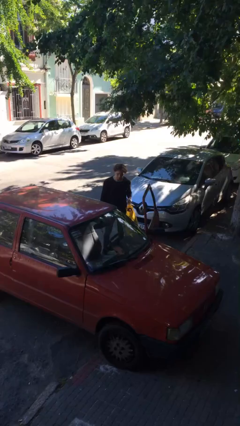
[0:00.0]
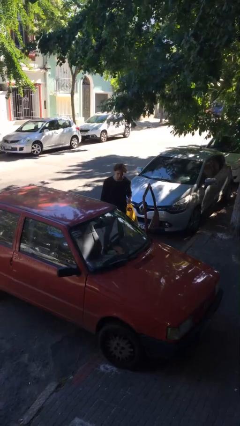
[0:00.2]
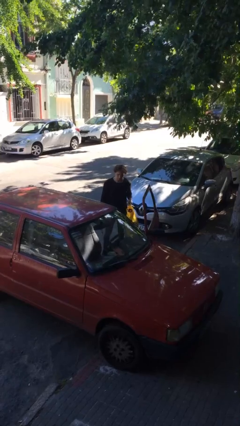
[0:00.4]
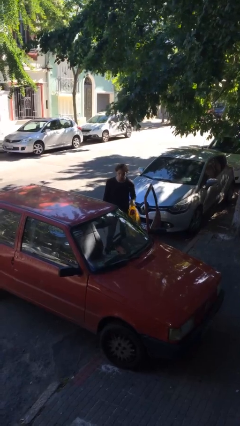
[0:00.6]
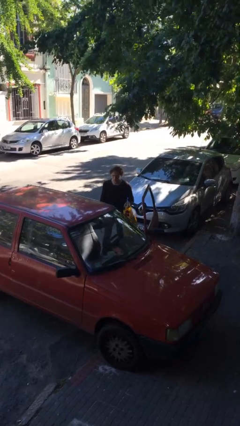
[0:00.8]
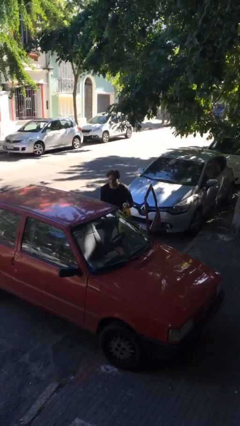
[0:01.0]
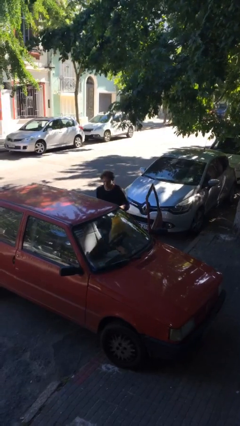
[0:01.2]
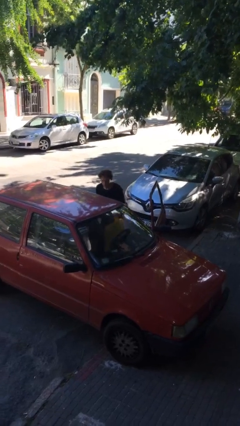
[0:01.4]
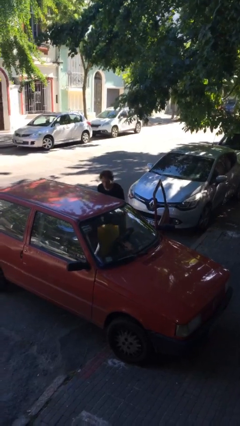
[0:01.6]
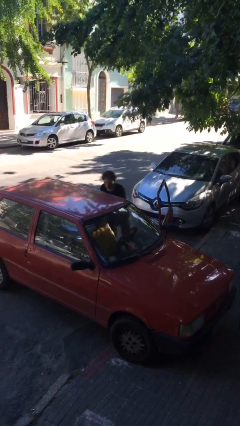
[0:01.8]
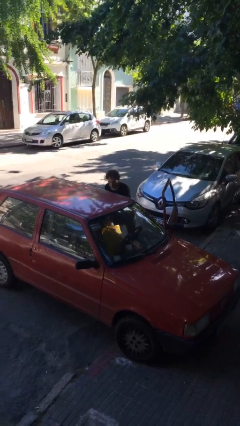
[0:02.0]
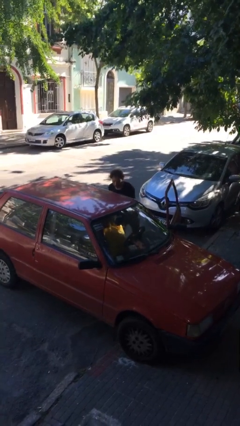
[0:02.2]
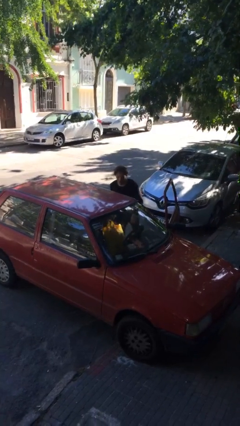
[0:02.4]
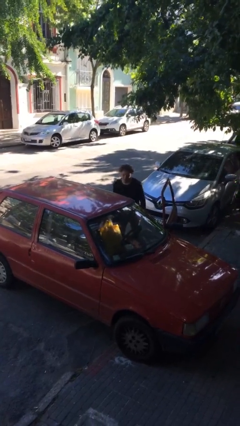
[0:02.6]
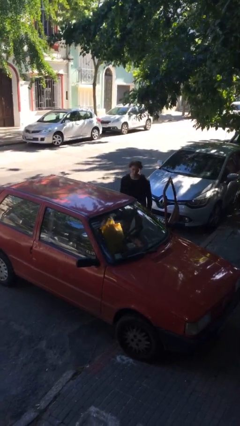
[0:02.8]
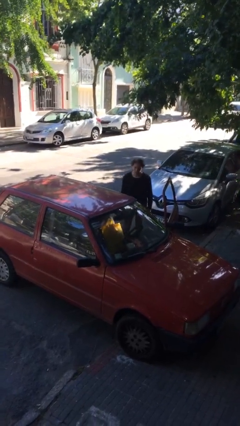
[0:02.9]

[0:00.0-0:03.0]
person loads car

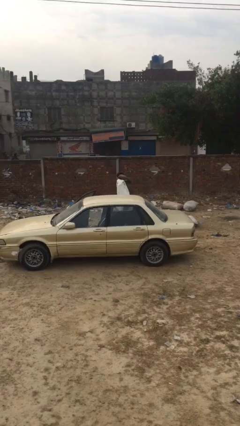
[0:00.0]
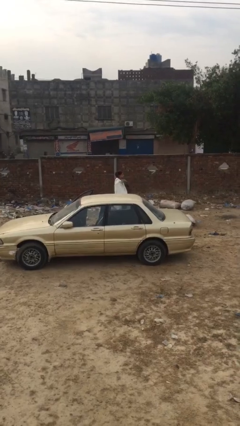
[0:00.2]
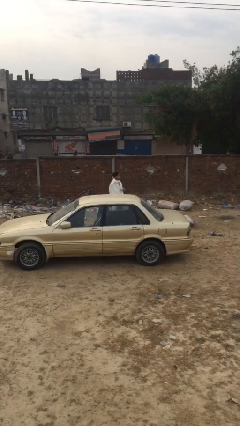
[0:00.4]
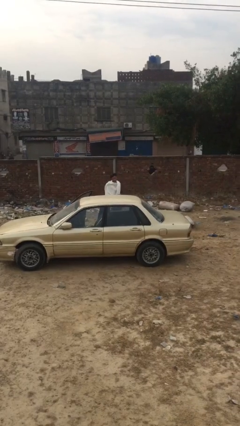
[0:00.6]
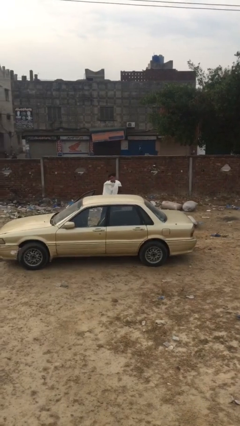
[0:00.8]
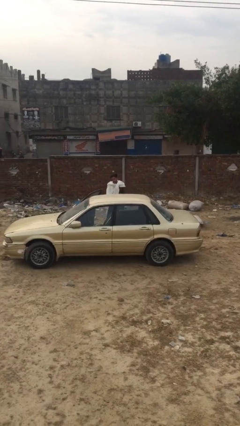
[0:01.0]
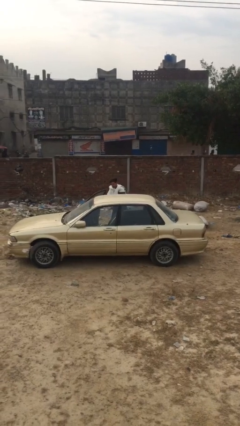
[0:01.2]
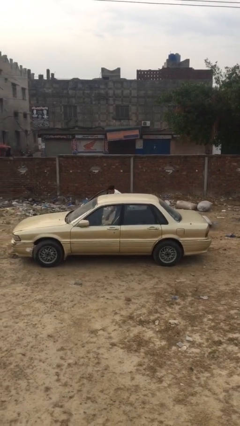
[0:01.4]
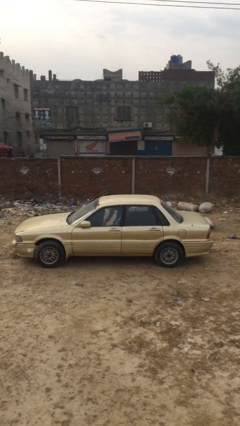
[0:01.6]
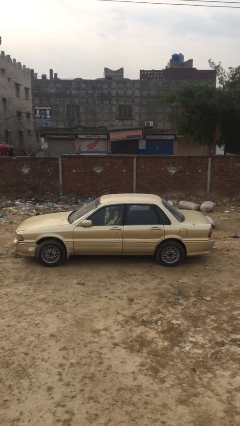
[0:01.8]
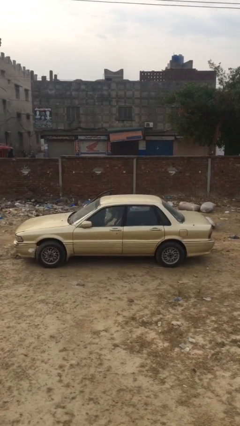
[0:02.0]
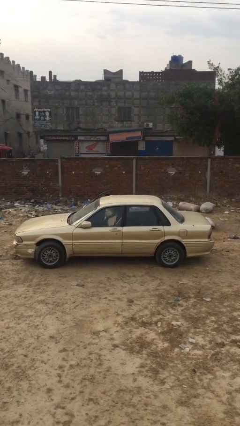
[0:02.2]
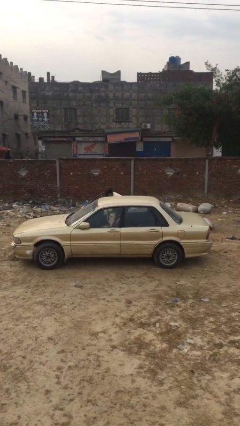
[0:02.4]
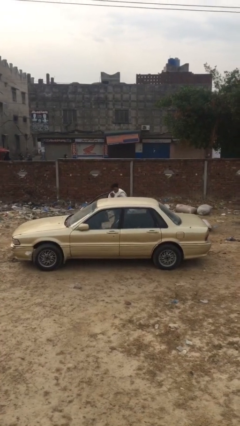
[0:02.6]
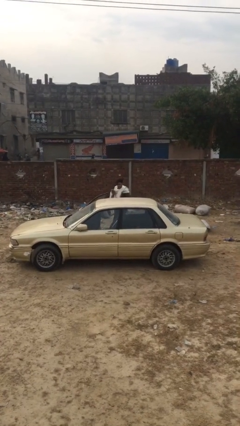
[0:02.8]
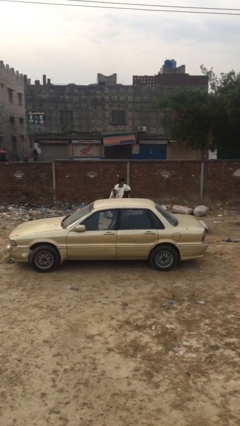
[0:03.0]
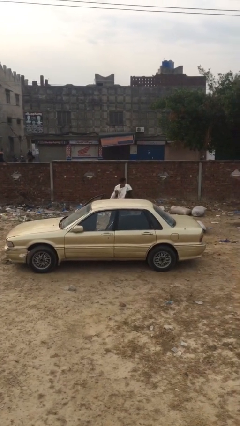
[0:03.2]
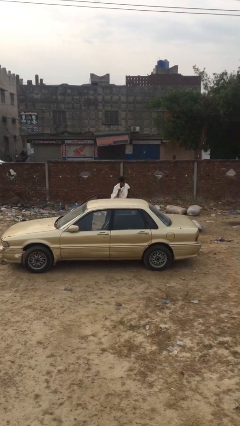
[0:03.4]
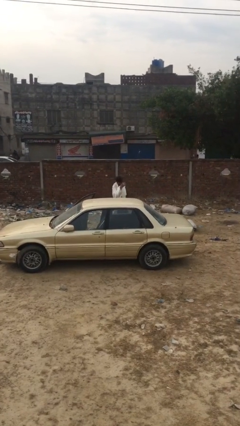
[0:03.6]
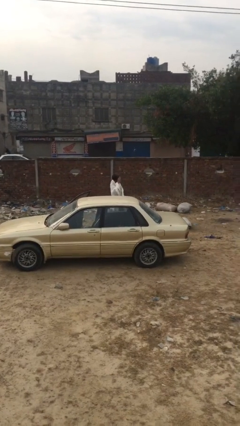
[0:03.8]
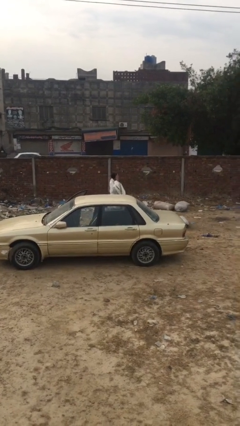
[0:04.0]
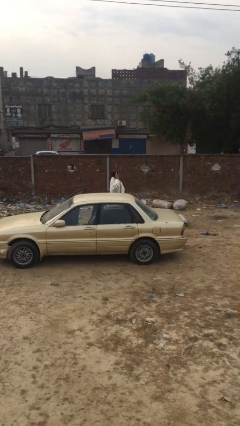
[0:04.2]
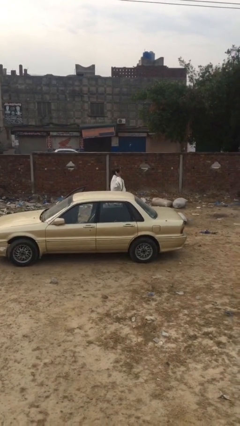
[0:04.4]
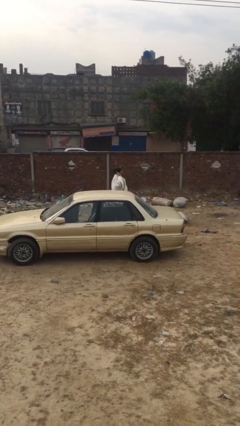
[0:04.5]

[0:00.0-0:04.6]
person unloads car

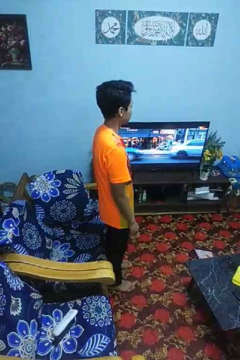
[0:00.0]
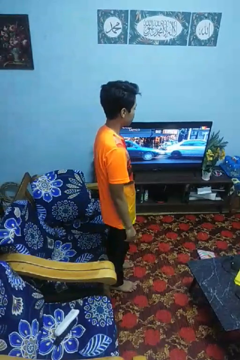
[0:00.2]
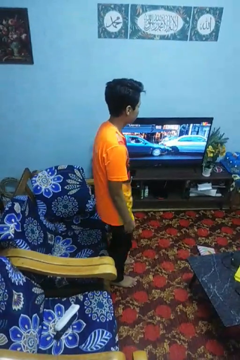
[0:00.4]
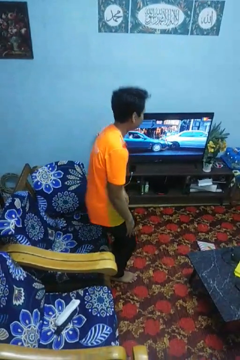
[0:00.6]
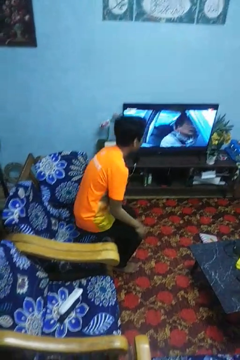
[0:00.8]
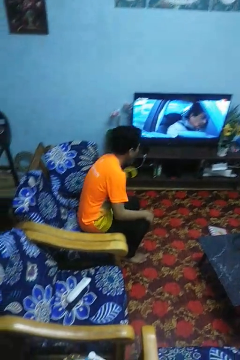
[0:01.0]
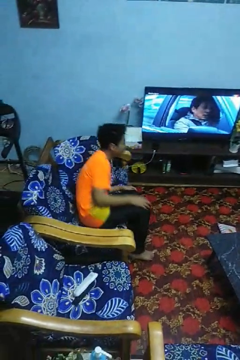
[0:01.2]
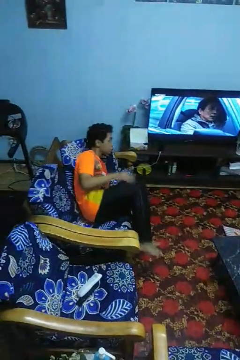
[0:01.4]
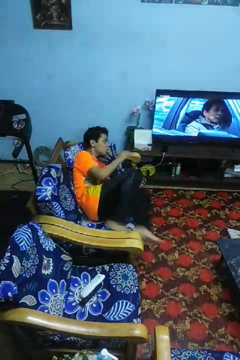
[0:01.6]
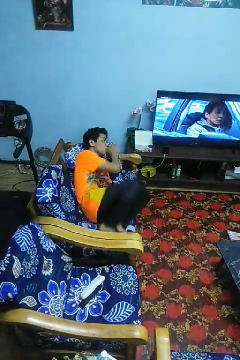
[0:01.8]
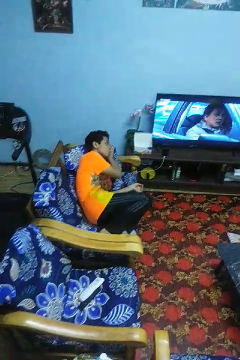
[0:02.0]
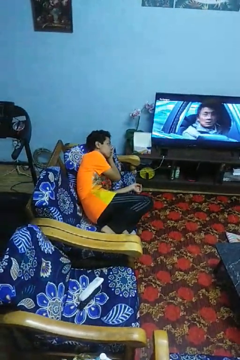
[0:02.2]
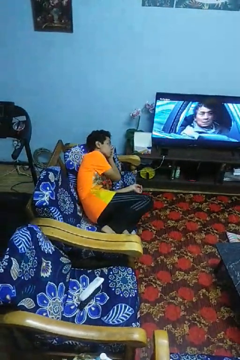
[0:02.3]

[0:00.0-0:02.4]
person lies down on couch

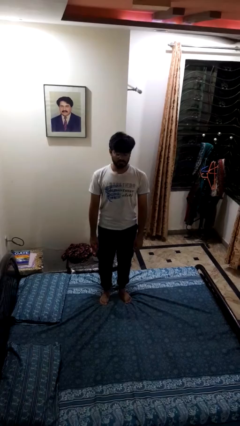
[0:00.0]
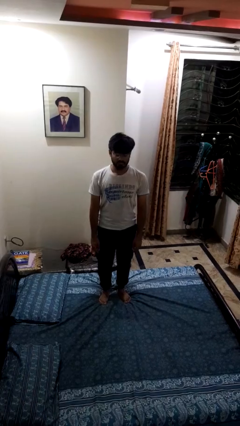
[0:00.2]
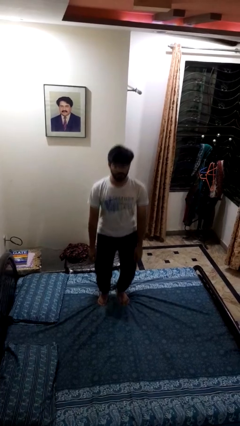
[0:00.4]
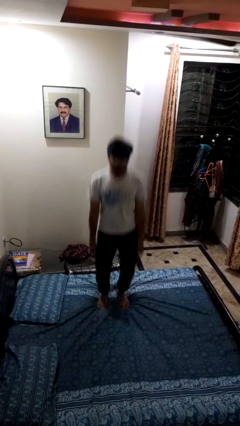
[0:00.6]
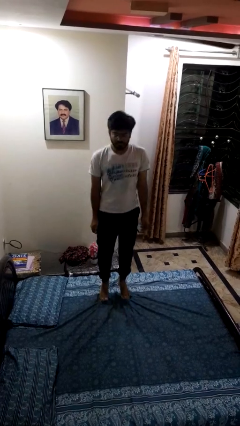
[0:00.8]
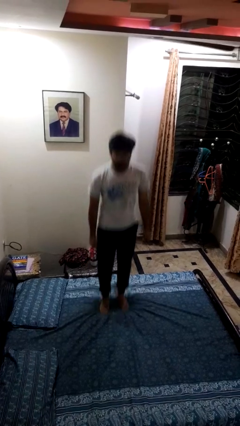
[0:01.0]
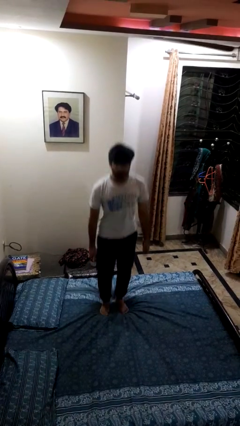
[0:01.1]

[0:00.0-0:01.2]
person jumps on bed

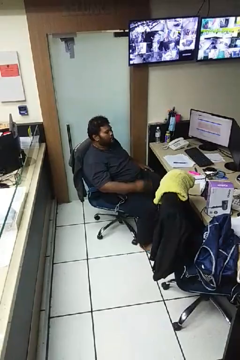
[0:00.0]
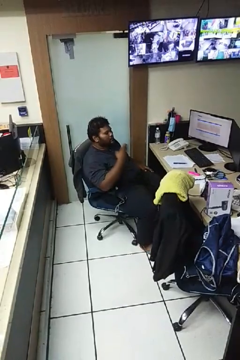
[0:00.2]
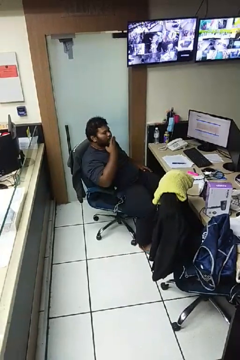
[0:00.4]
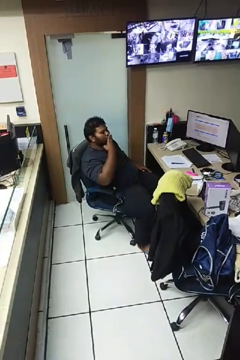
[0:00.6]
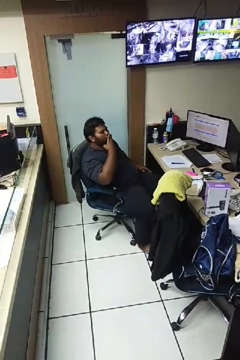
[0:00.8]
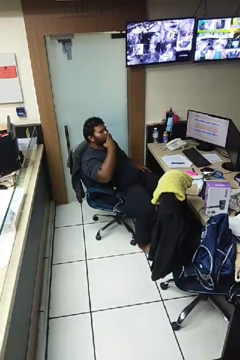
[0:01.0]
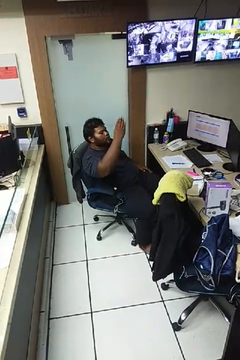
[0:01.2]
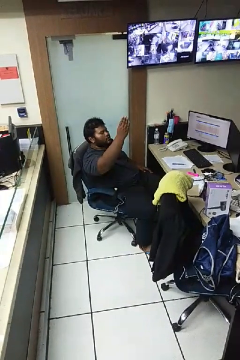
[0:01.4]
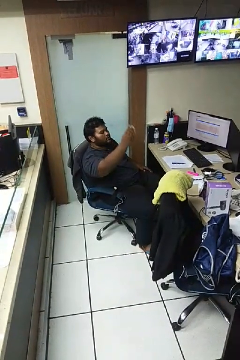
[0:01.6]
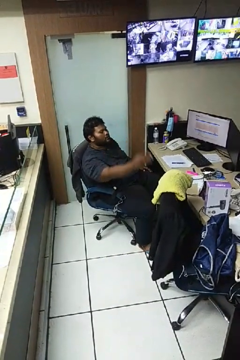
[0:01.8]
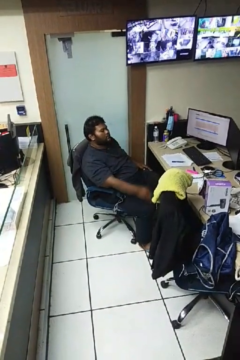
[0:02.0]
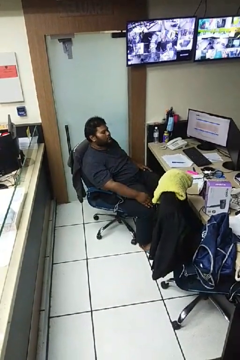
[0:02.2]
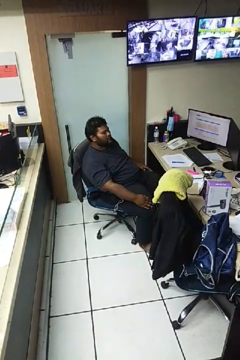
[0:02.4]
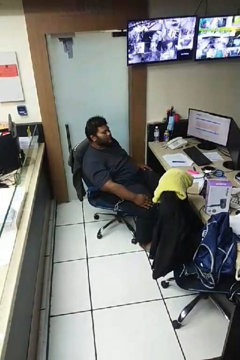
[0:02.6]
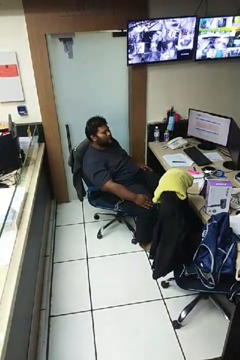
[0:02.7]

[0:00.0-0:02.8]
person gestures blow kiss

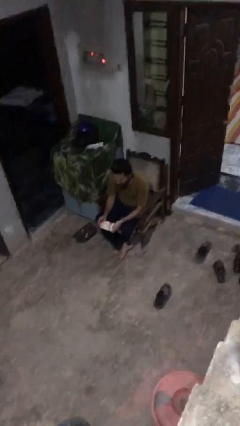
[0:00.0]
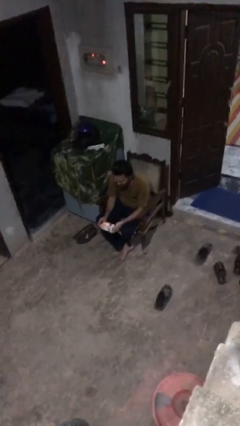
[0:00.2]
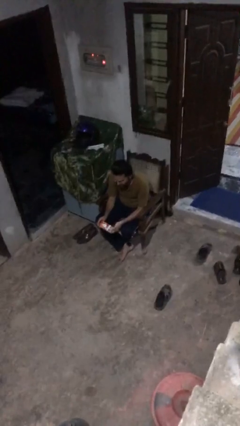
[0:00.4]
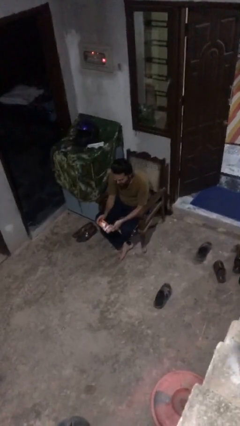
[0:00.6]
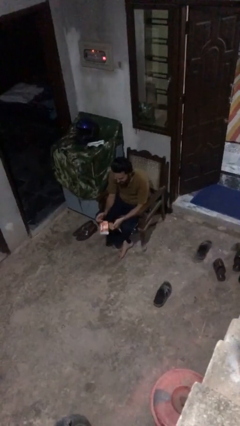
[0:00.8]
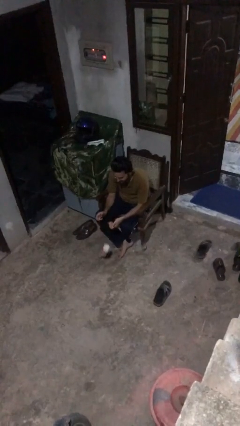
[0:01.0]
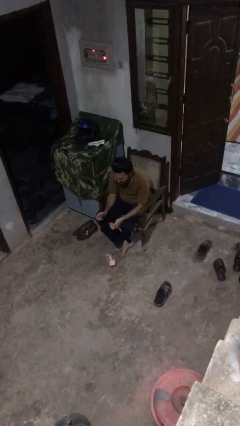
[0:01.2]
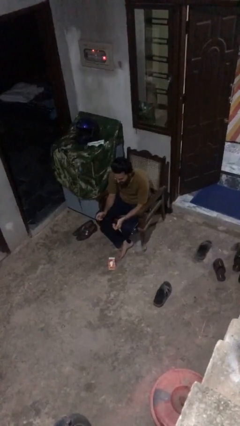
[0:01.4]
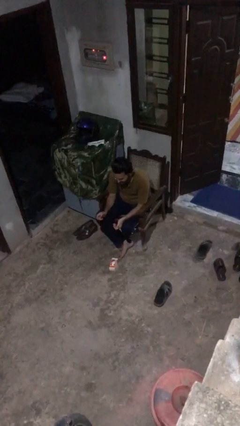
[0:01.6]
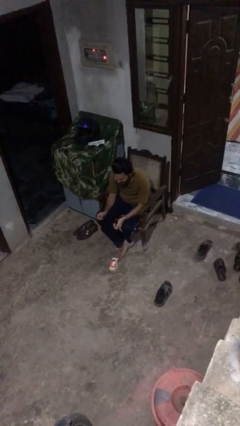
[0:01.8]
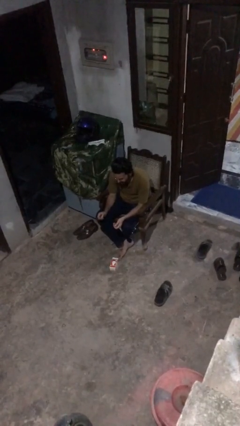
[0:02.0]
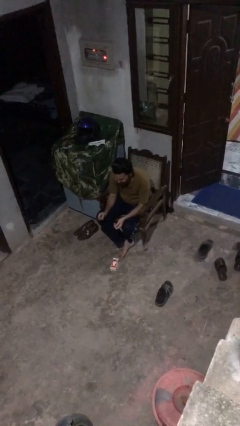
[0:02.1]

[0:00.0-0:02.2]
person drops object

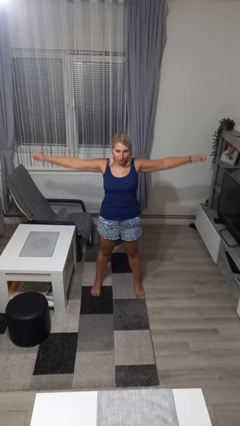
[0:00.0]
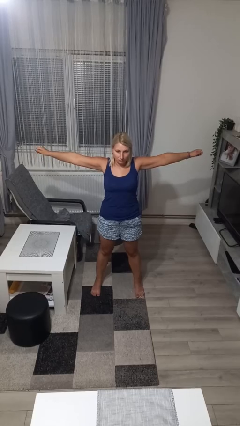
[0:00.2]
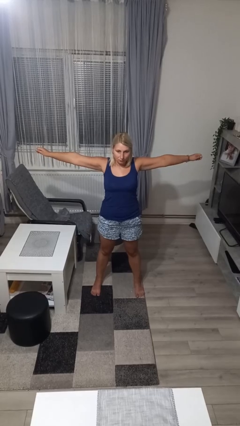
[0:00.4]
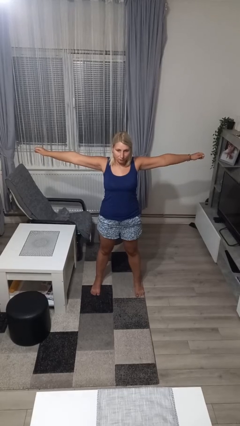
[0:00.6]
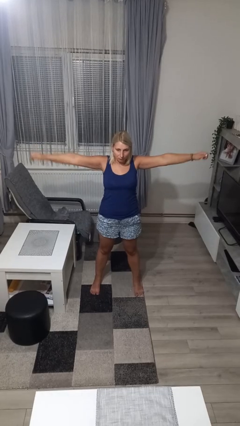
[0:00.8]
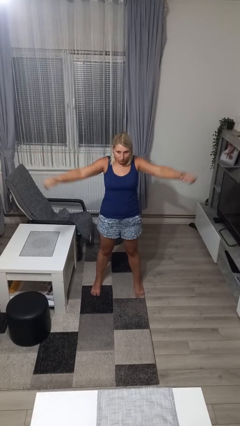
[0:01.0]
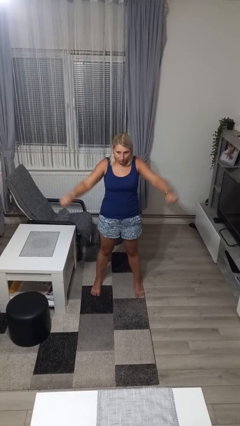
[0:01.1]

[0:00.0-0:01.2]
person stretches arms to side

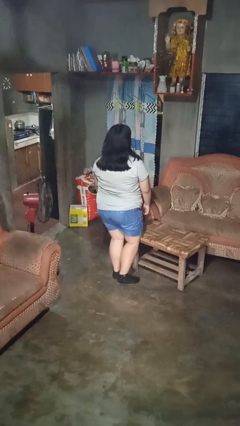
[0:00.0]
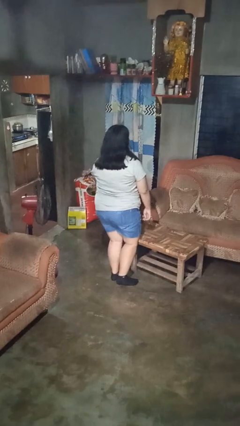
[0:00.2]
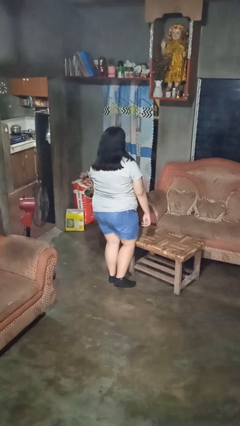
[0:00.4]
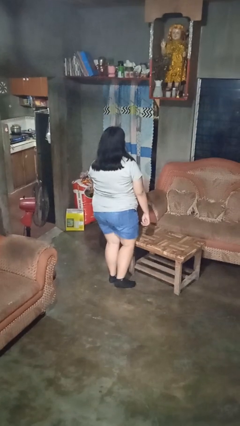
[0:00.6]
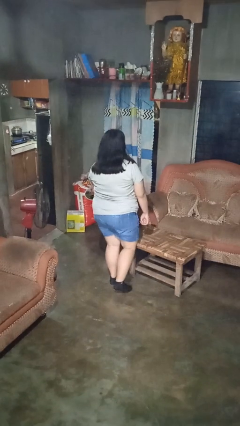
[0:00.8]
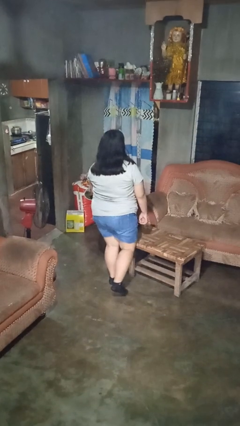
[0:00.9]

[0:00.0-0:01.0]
person bumps into table
